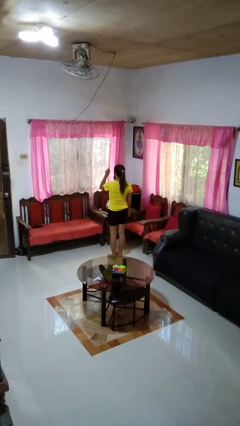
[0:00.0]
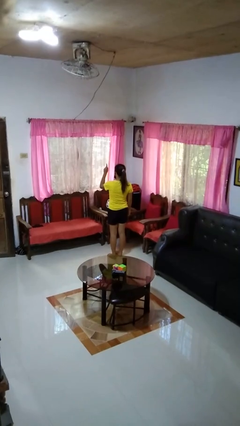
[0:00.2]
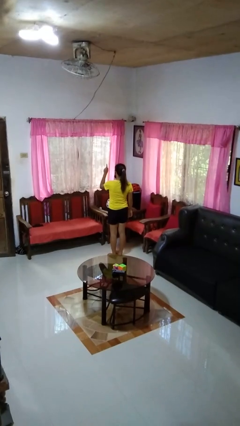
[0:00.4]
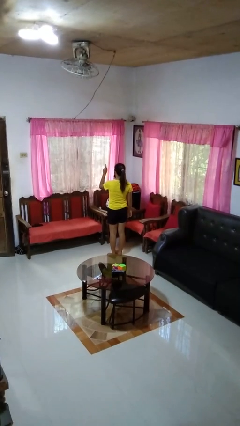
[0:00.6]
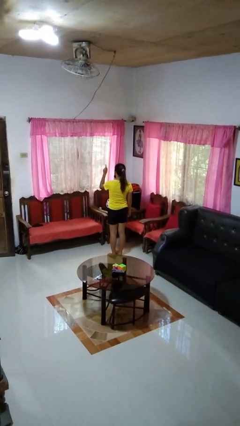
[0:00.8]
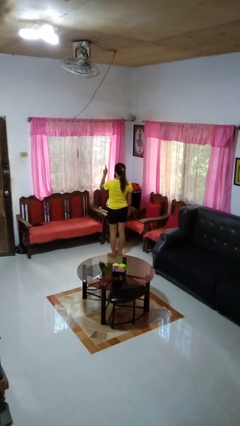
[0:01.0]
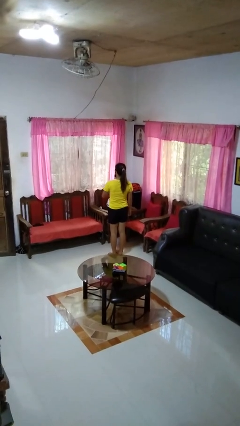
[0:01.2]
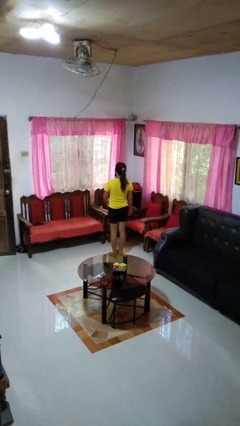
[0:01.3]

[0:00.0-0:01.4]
person gestures number one

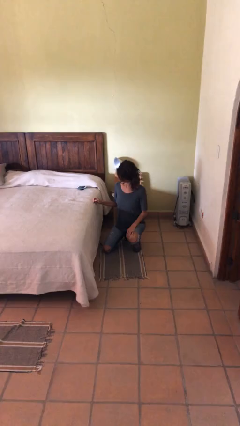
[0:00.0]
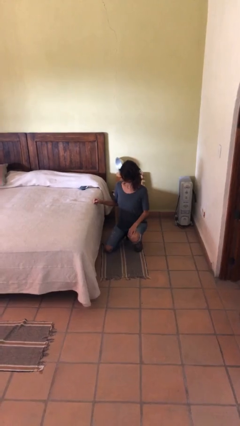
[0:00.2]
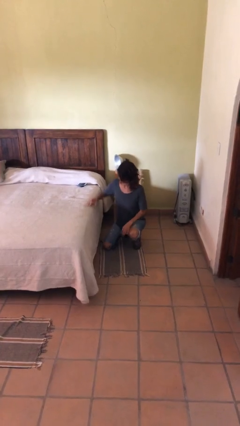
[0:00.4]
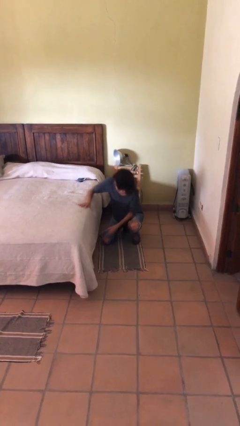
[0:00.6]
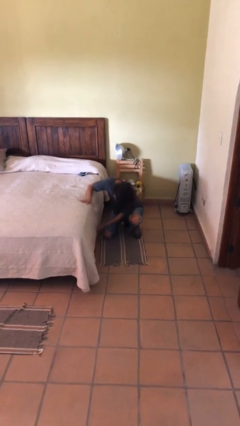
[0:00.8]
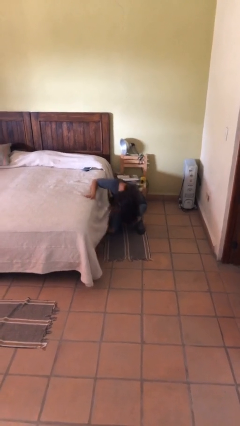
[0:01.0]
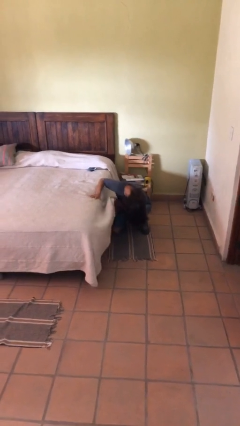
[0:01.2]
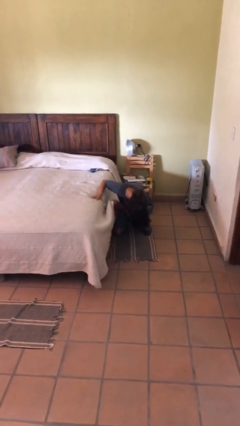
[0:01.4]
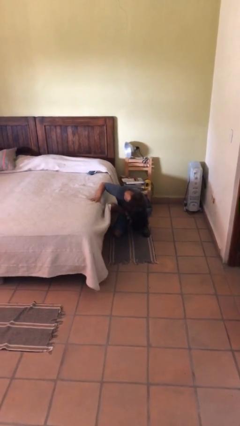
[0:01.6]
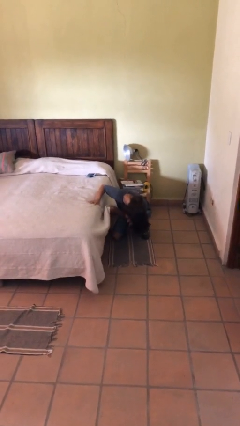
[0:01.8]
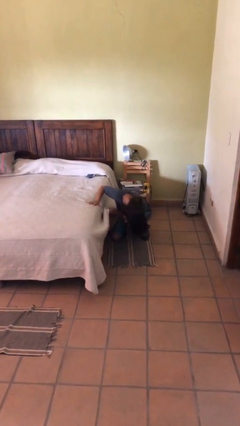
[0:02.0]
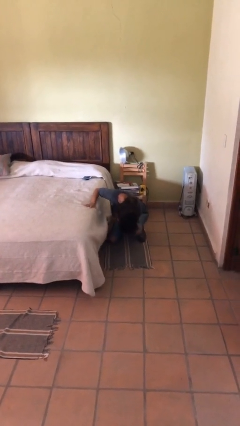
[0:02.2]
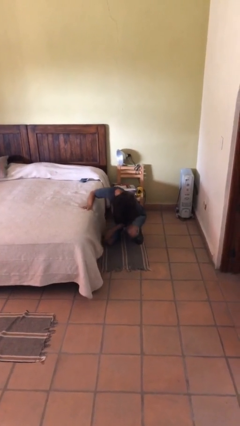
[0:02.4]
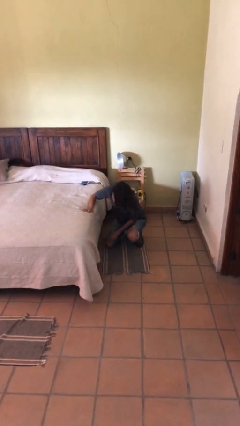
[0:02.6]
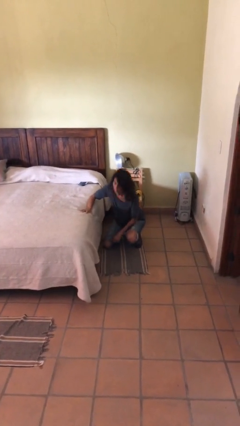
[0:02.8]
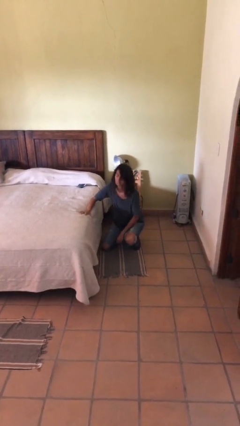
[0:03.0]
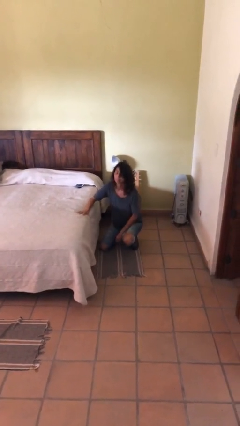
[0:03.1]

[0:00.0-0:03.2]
person searches under bed

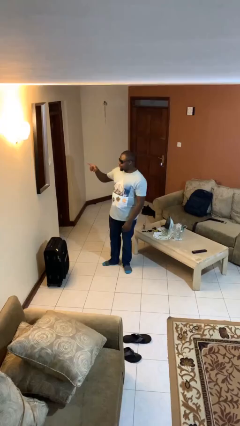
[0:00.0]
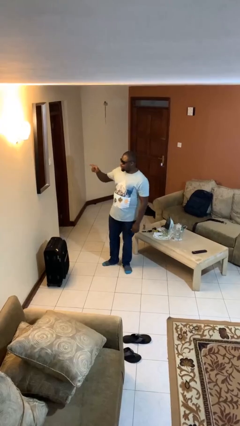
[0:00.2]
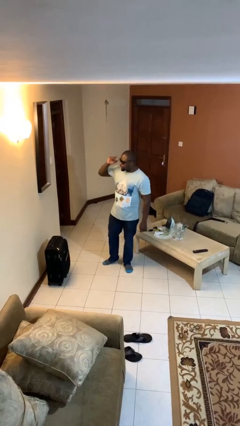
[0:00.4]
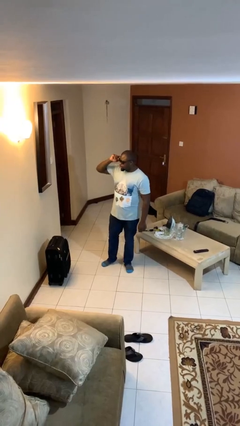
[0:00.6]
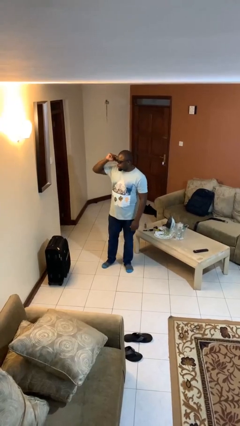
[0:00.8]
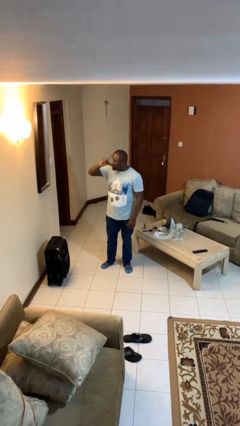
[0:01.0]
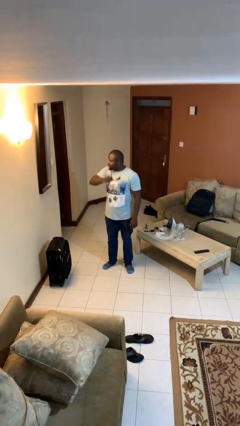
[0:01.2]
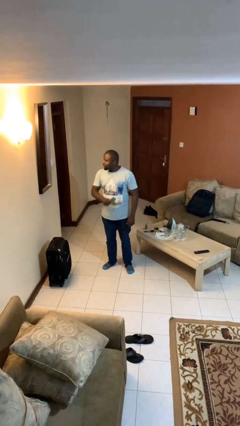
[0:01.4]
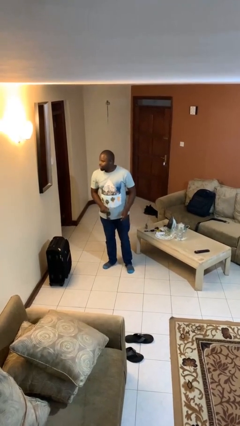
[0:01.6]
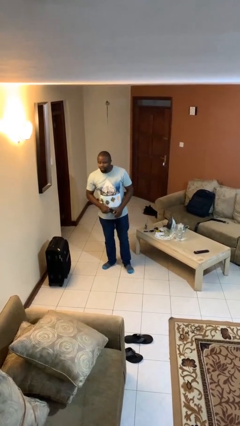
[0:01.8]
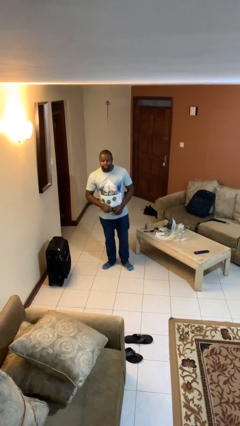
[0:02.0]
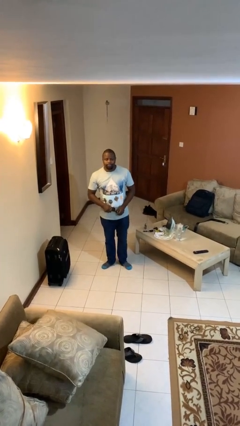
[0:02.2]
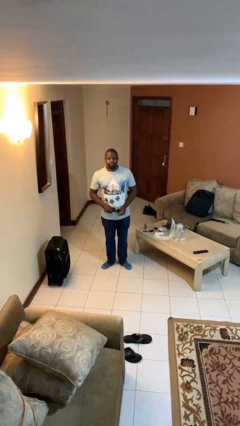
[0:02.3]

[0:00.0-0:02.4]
person takes off sunglasses

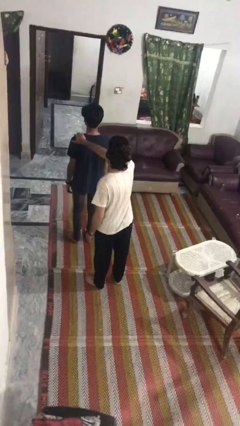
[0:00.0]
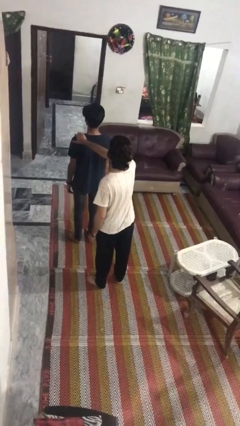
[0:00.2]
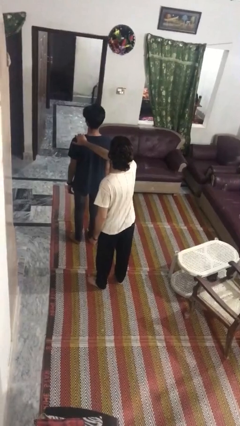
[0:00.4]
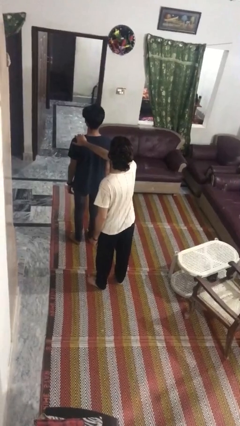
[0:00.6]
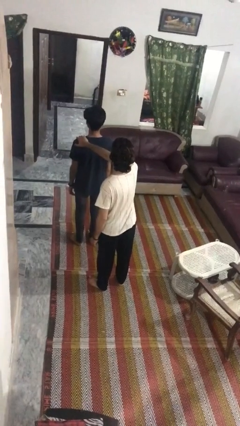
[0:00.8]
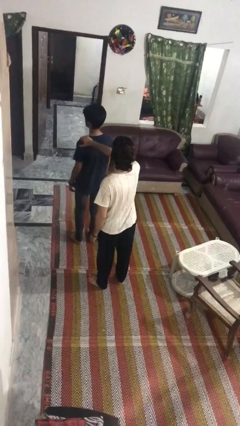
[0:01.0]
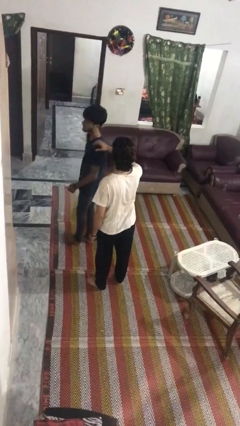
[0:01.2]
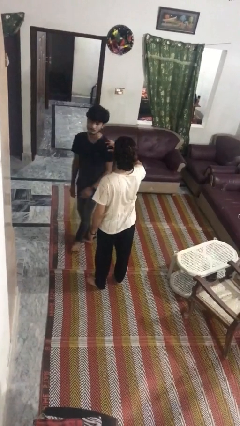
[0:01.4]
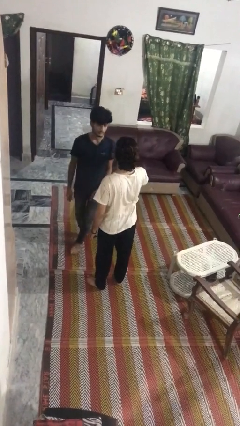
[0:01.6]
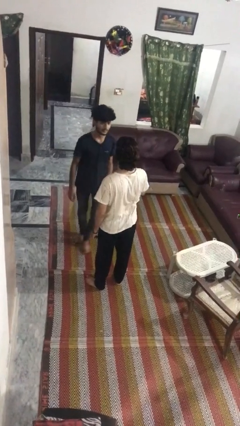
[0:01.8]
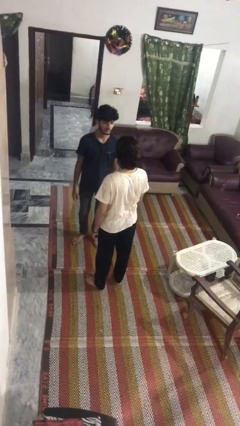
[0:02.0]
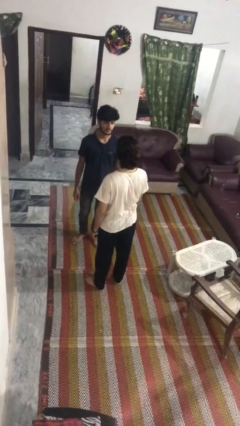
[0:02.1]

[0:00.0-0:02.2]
person spins person around

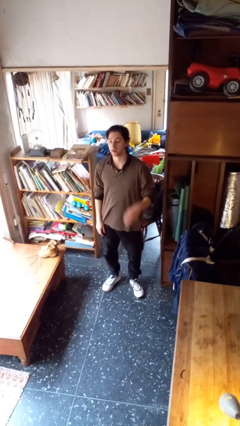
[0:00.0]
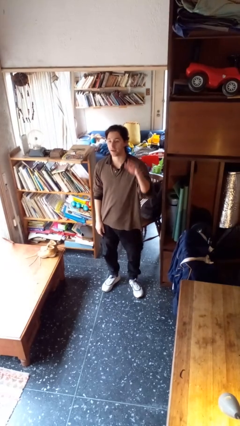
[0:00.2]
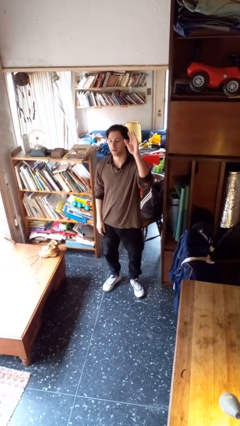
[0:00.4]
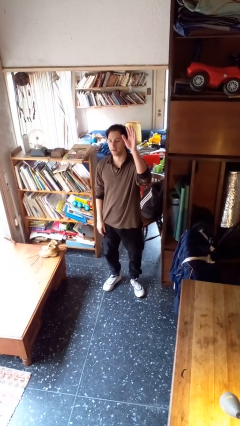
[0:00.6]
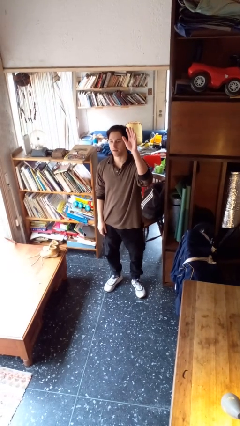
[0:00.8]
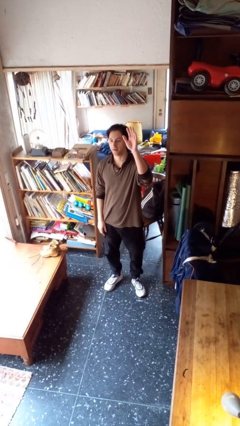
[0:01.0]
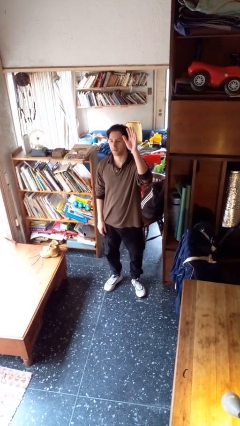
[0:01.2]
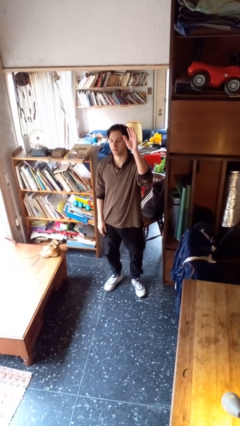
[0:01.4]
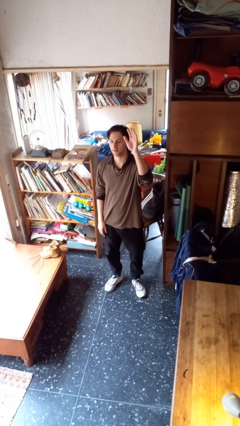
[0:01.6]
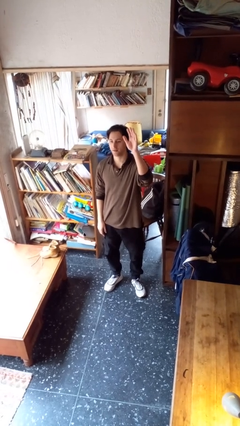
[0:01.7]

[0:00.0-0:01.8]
person gestures raise hand

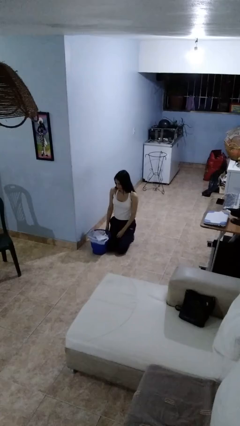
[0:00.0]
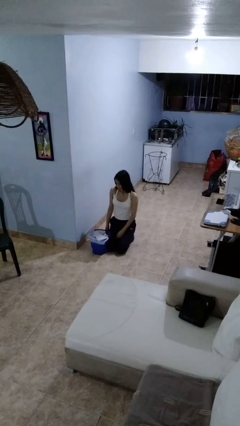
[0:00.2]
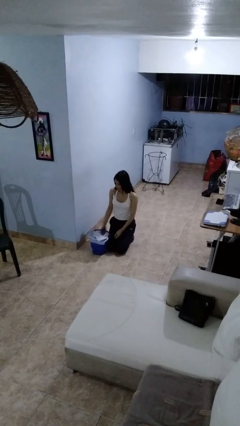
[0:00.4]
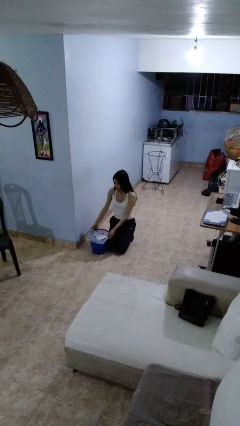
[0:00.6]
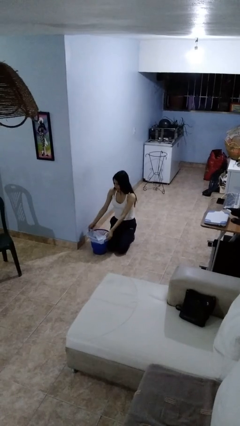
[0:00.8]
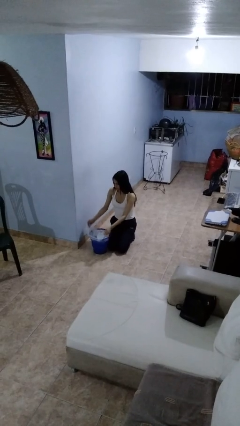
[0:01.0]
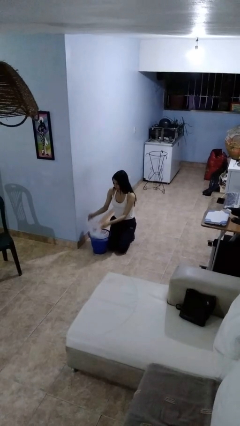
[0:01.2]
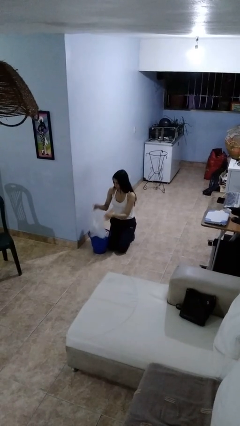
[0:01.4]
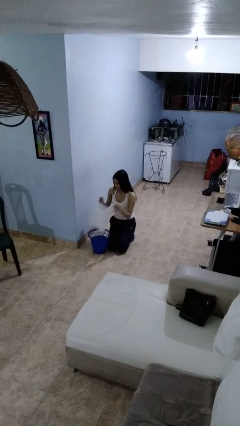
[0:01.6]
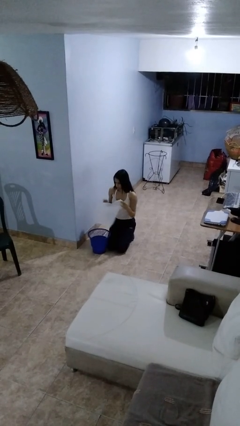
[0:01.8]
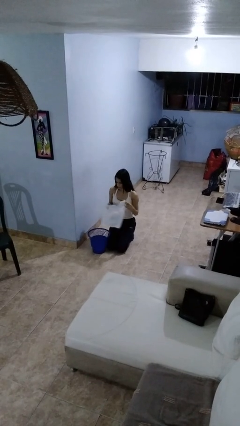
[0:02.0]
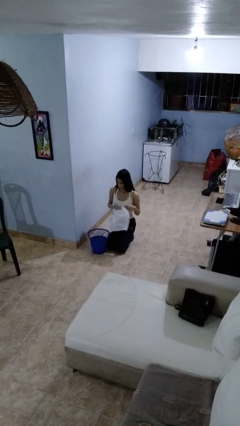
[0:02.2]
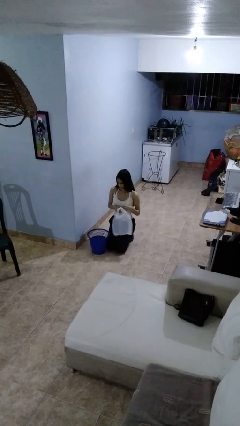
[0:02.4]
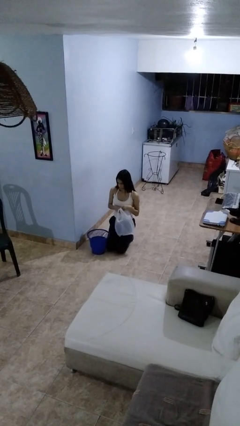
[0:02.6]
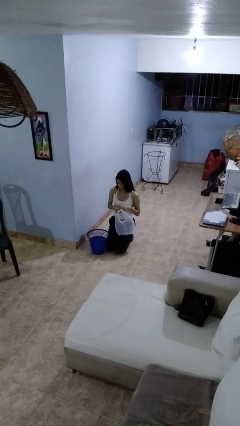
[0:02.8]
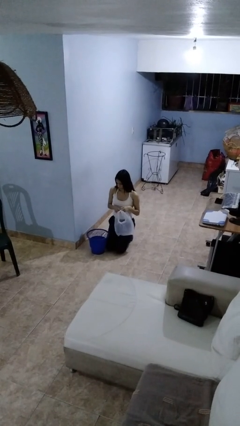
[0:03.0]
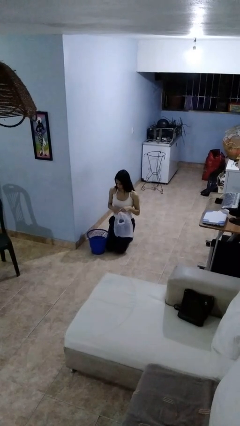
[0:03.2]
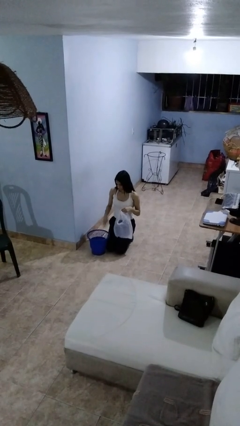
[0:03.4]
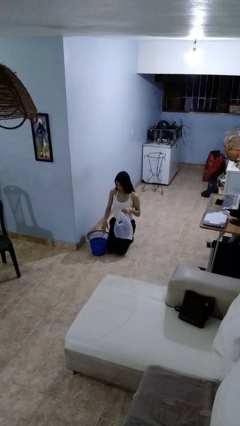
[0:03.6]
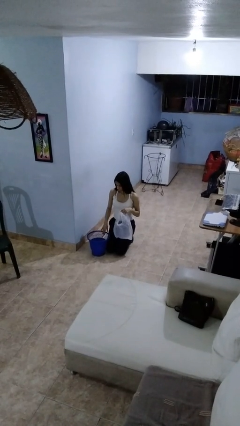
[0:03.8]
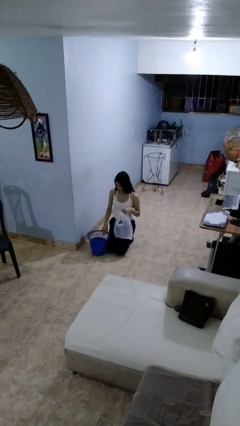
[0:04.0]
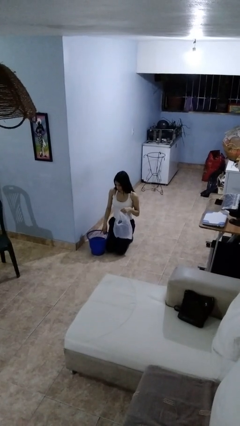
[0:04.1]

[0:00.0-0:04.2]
person removes trashbag from trashcan

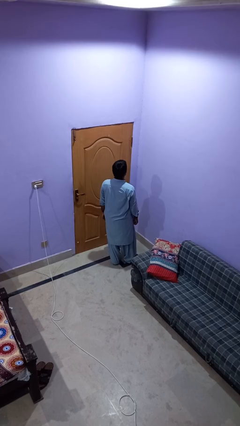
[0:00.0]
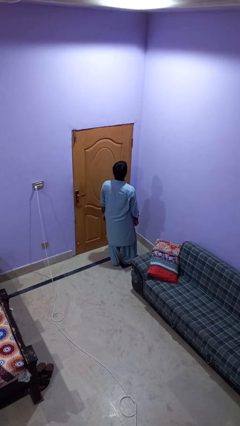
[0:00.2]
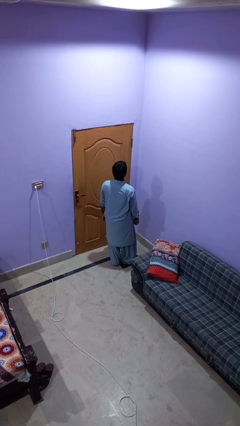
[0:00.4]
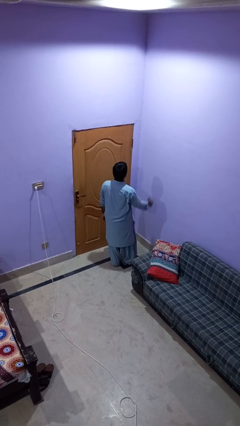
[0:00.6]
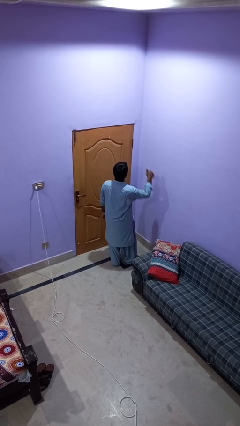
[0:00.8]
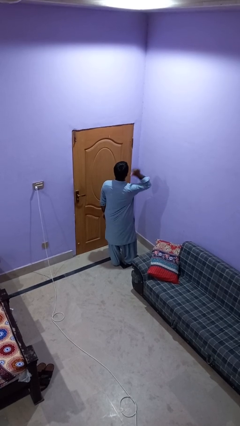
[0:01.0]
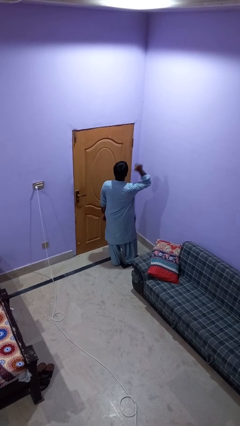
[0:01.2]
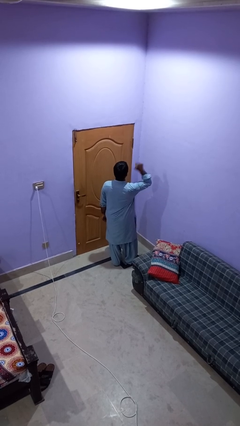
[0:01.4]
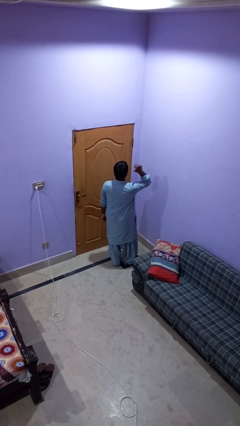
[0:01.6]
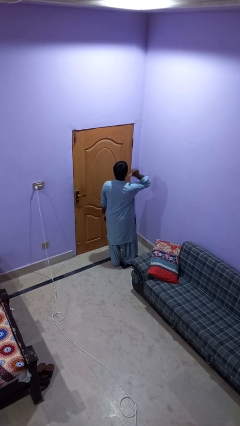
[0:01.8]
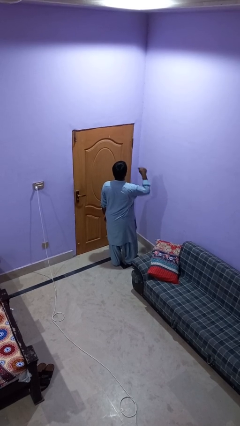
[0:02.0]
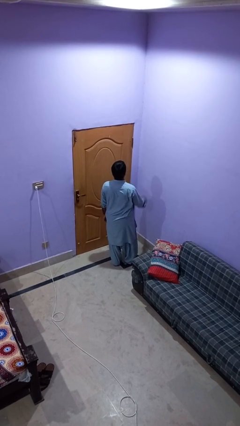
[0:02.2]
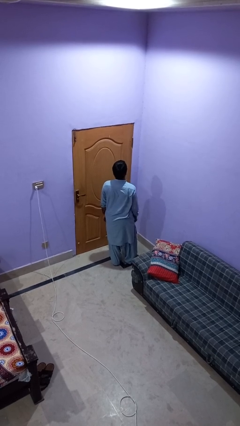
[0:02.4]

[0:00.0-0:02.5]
person gestures behind me
